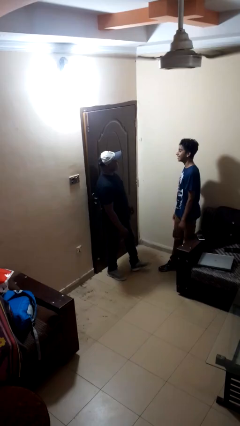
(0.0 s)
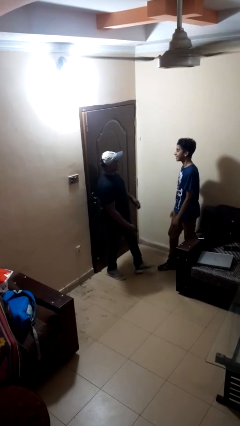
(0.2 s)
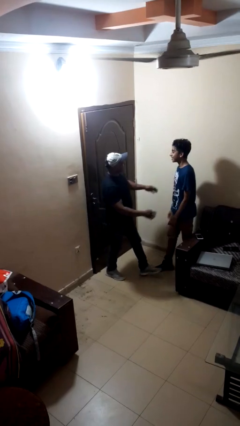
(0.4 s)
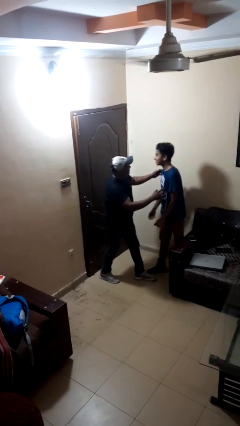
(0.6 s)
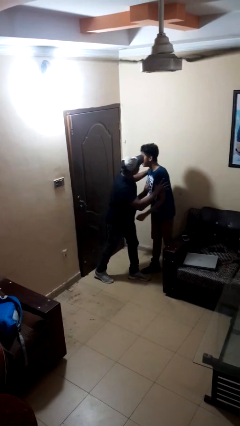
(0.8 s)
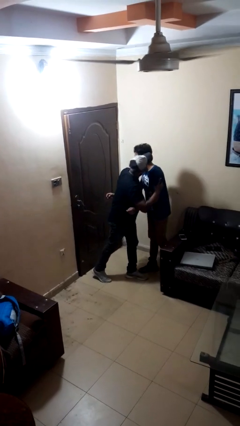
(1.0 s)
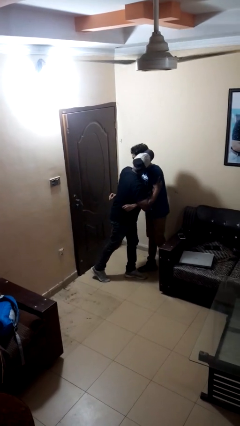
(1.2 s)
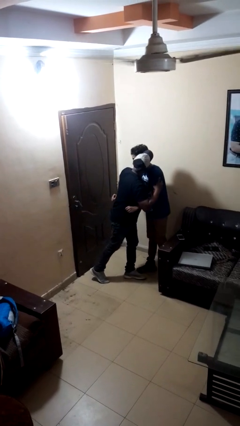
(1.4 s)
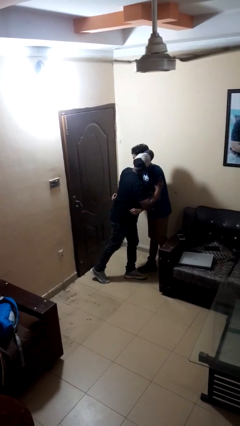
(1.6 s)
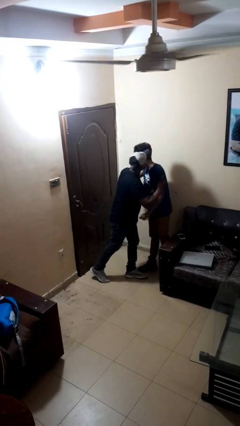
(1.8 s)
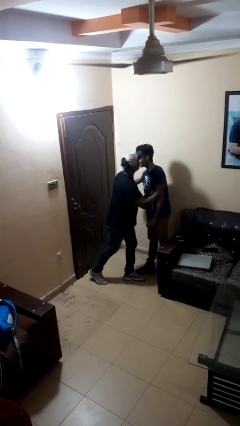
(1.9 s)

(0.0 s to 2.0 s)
person kisses cheek of person

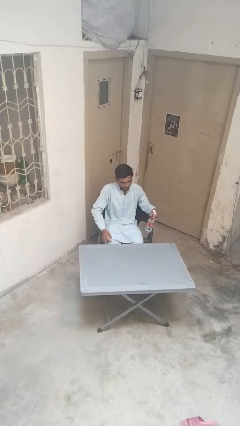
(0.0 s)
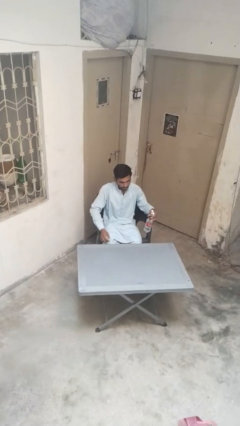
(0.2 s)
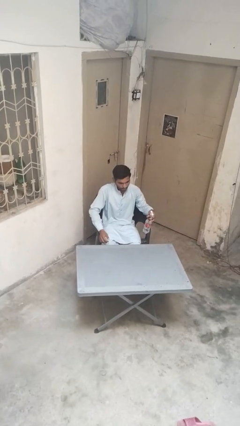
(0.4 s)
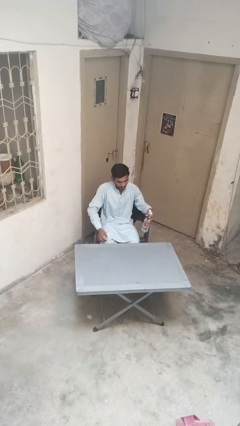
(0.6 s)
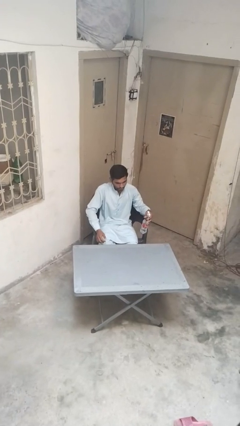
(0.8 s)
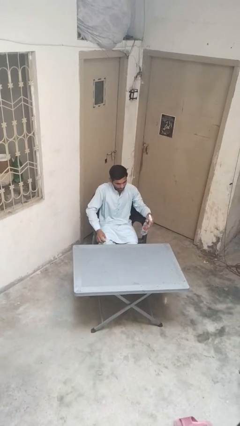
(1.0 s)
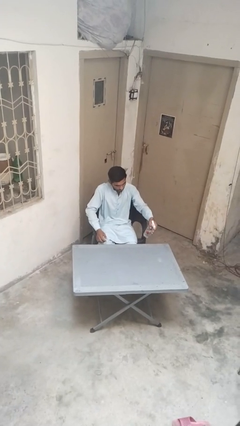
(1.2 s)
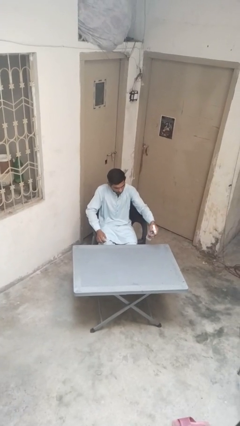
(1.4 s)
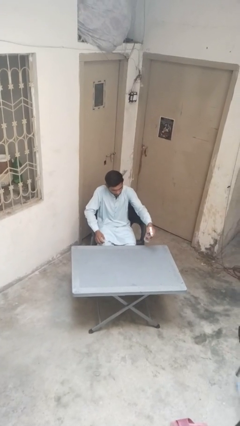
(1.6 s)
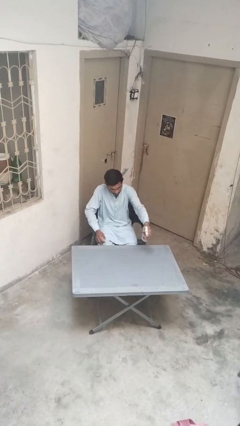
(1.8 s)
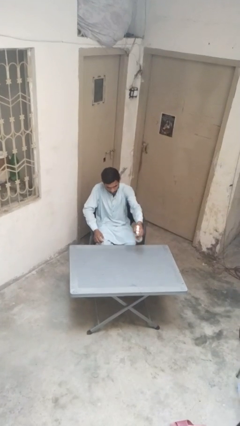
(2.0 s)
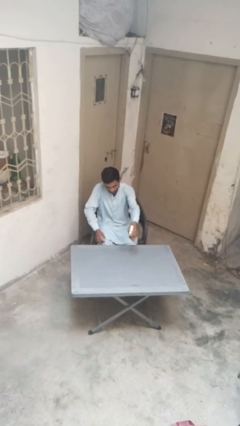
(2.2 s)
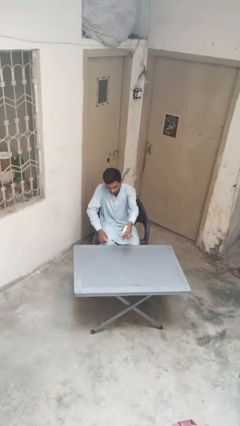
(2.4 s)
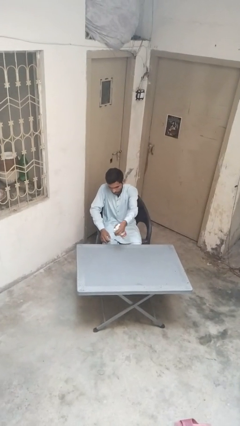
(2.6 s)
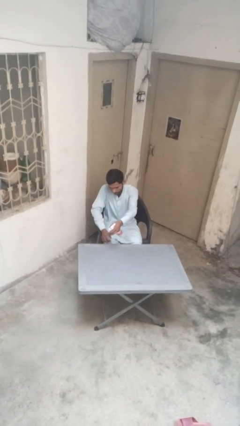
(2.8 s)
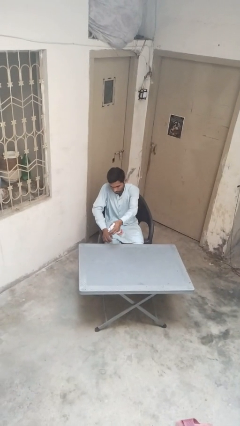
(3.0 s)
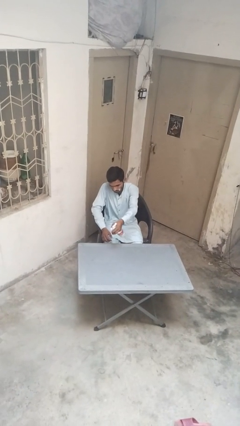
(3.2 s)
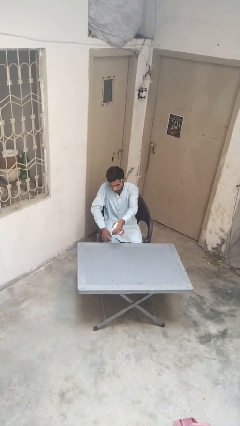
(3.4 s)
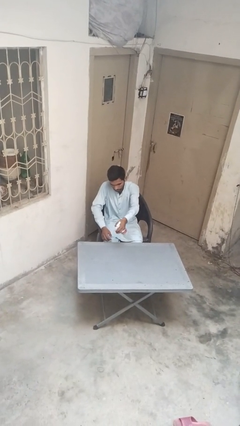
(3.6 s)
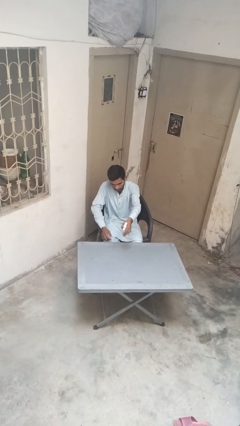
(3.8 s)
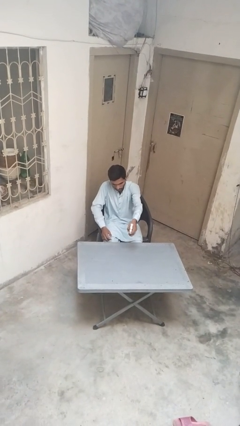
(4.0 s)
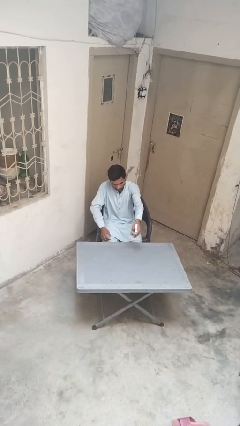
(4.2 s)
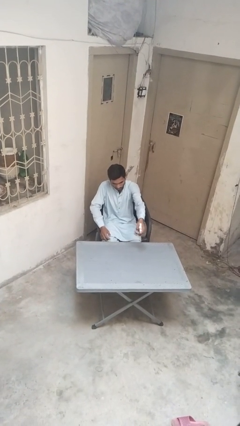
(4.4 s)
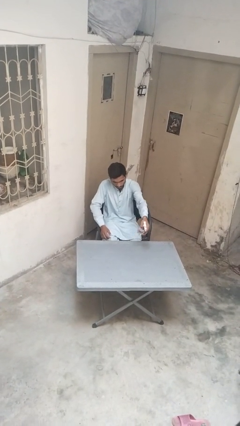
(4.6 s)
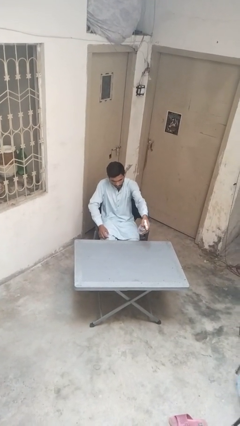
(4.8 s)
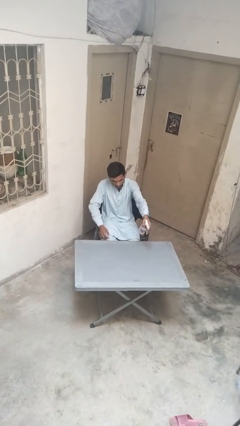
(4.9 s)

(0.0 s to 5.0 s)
person sprays from bottle

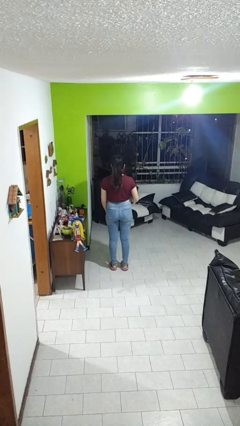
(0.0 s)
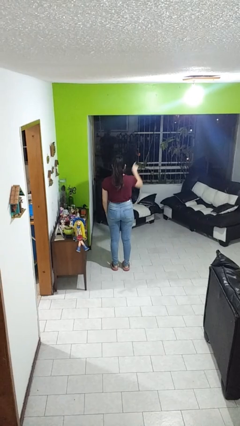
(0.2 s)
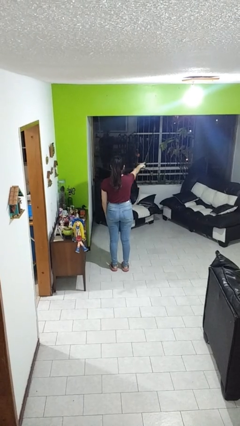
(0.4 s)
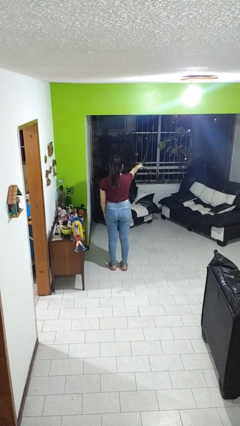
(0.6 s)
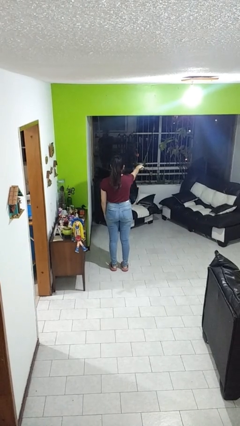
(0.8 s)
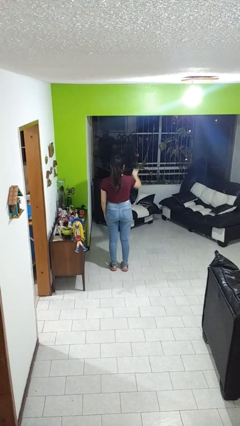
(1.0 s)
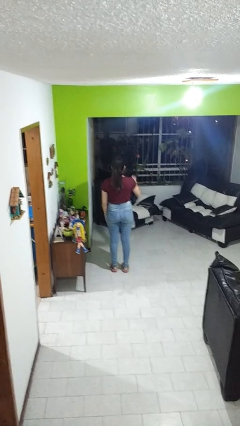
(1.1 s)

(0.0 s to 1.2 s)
person points at person

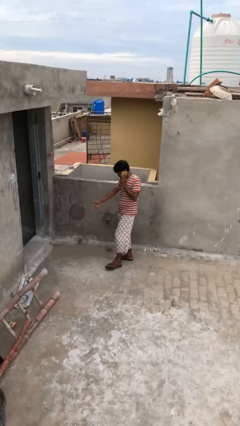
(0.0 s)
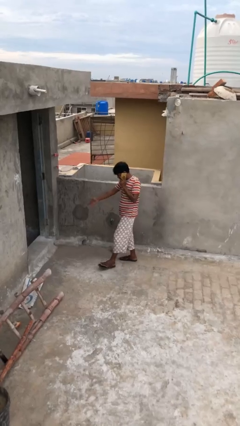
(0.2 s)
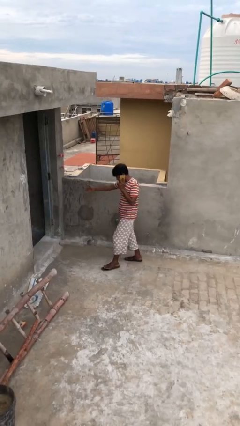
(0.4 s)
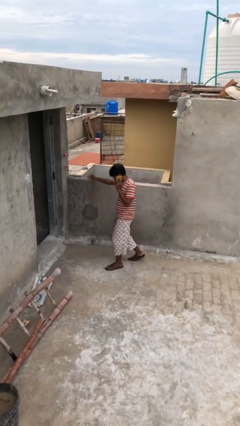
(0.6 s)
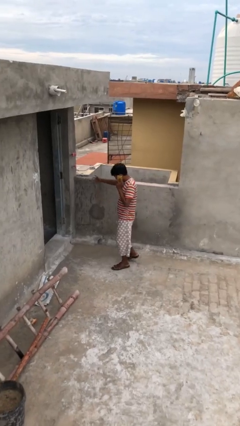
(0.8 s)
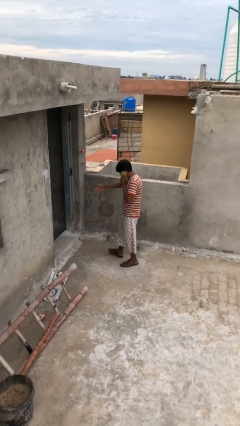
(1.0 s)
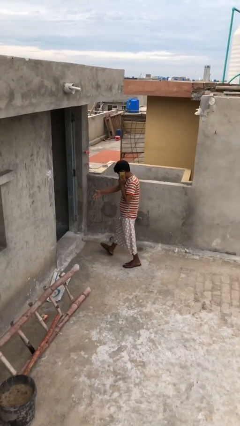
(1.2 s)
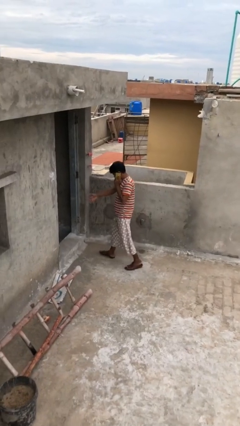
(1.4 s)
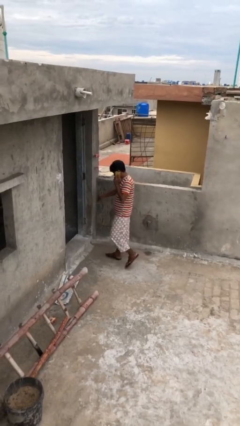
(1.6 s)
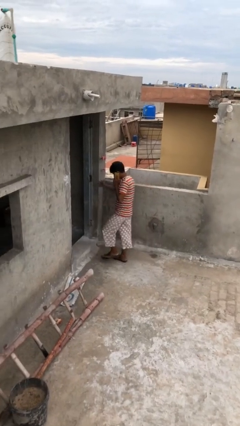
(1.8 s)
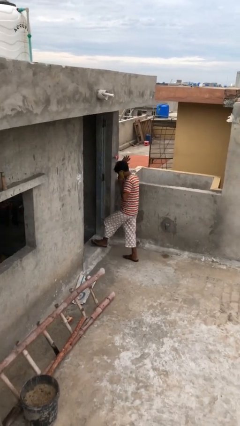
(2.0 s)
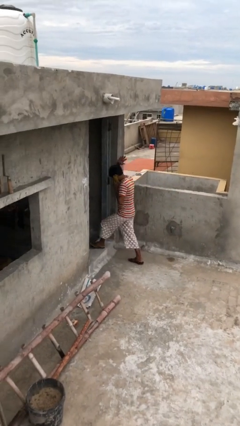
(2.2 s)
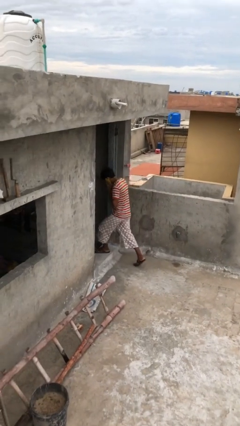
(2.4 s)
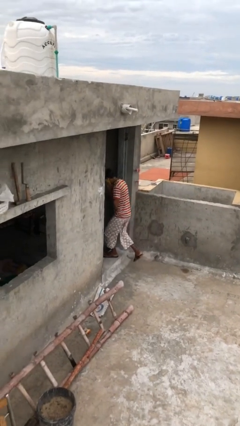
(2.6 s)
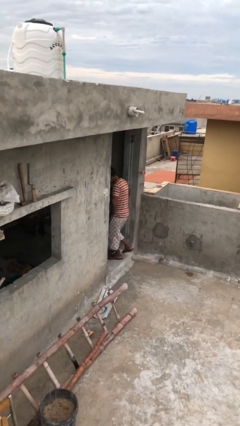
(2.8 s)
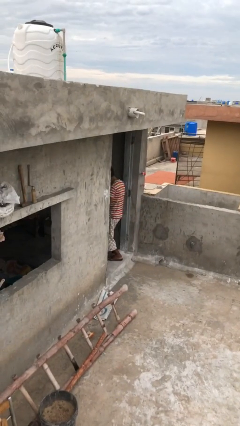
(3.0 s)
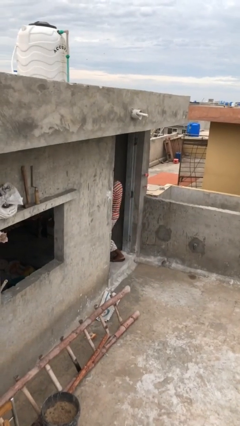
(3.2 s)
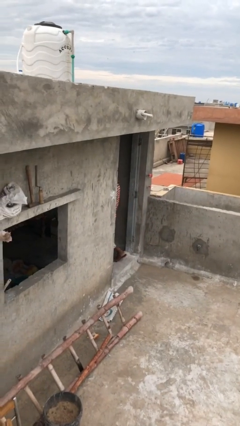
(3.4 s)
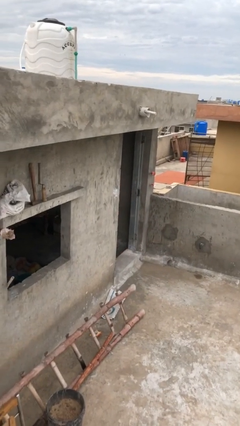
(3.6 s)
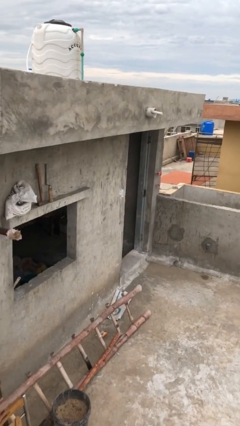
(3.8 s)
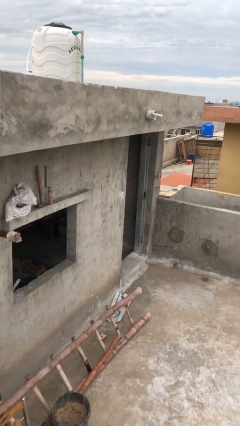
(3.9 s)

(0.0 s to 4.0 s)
person exits scene through structure

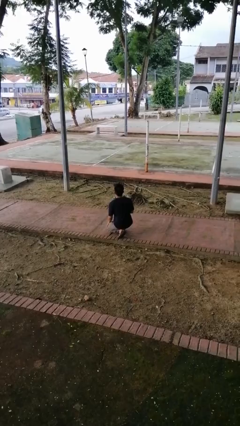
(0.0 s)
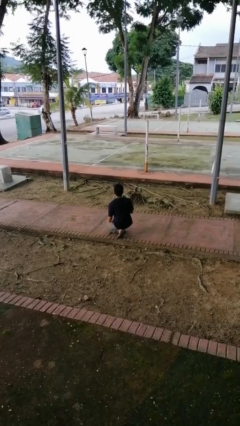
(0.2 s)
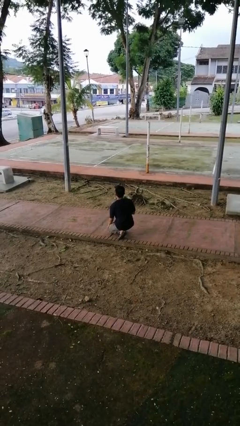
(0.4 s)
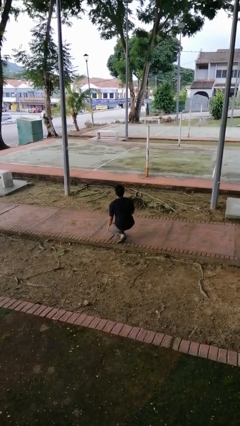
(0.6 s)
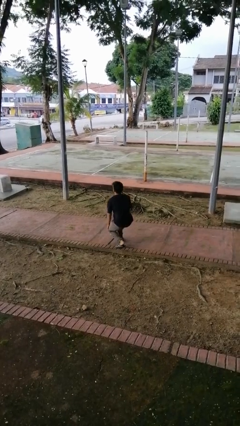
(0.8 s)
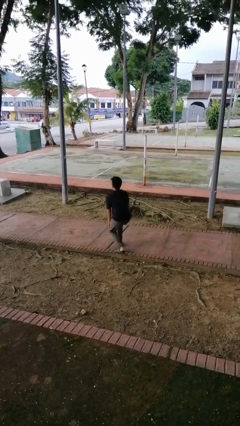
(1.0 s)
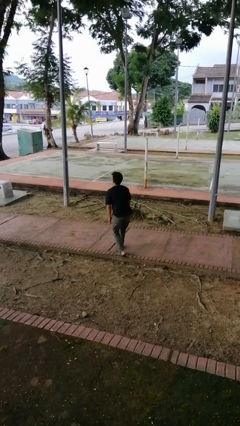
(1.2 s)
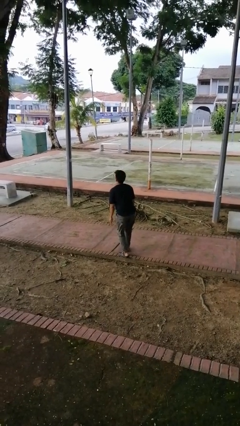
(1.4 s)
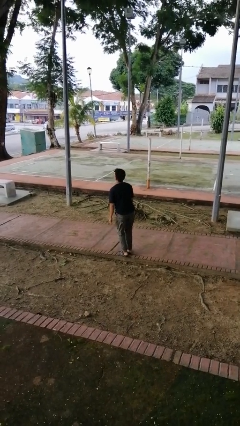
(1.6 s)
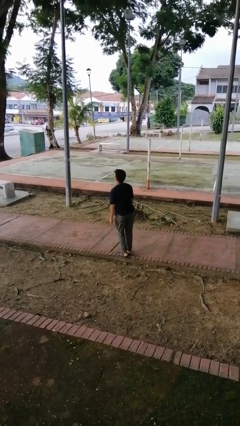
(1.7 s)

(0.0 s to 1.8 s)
person stands up from floor

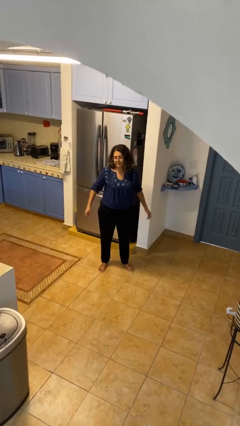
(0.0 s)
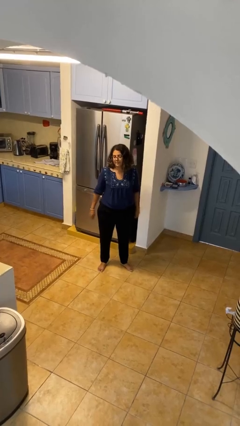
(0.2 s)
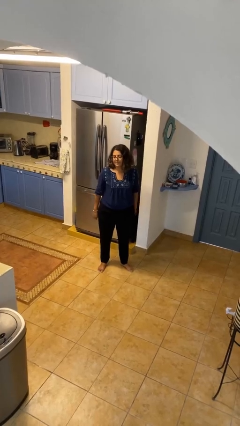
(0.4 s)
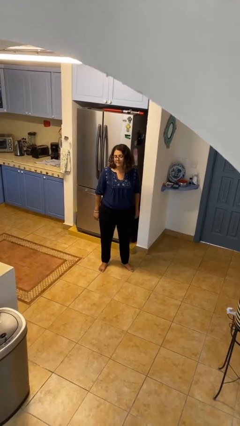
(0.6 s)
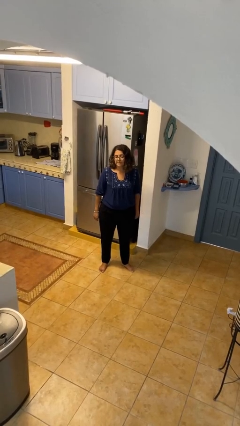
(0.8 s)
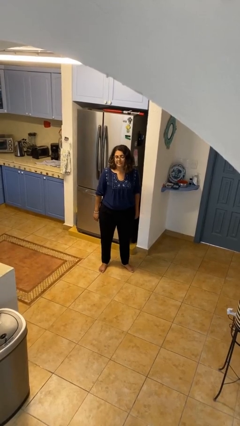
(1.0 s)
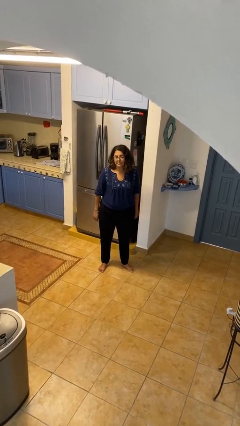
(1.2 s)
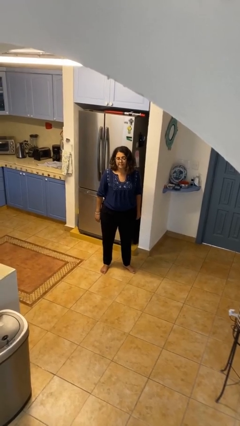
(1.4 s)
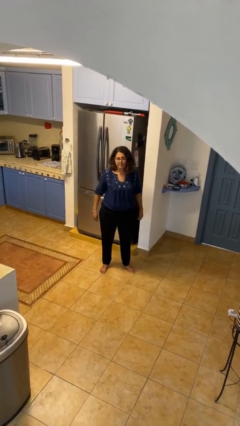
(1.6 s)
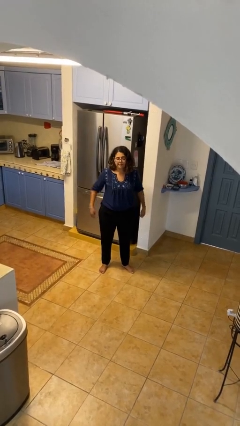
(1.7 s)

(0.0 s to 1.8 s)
person puts hands in back pockets

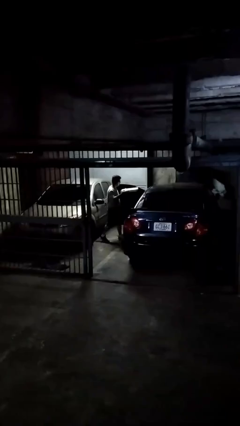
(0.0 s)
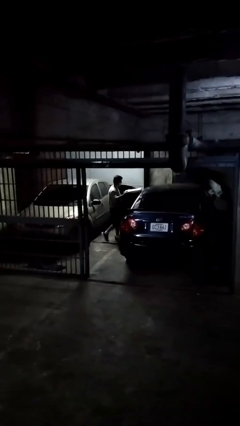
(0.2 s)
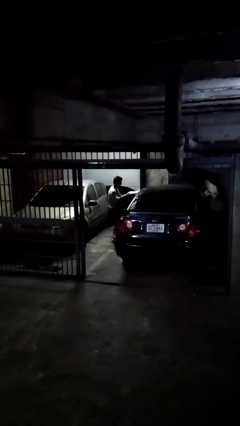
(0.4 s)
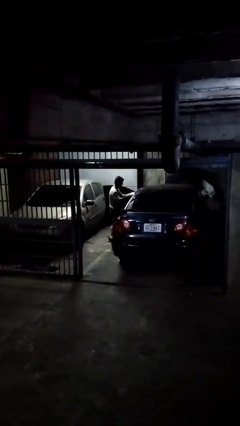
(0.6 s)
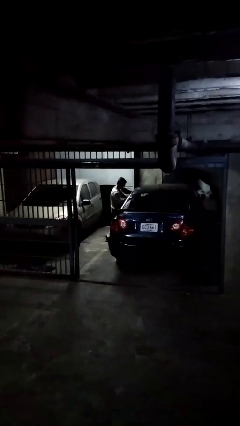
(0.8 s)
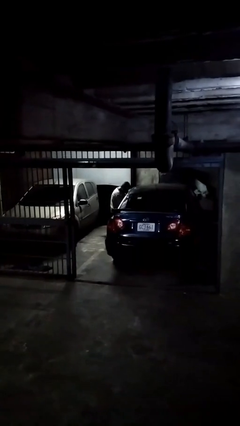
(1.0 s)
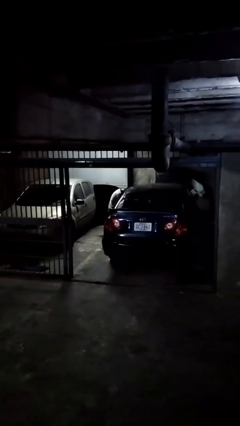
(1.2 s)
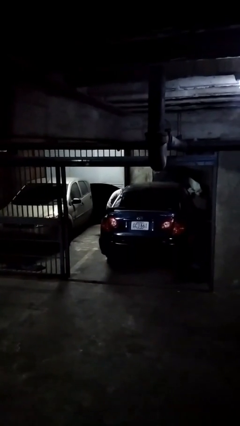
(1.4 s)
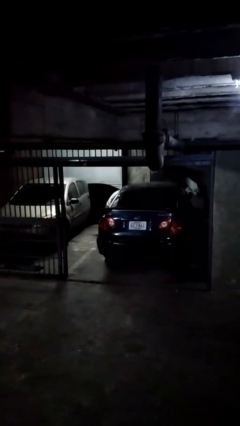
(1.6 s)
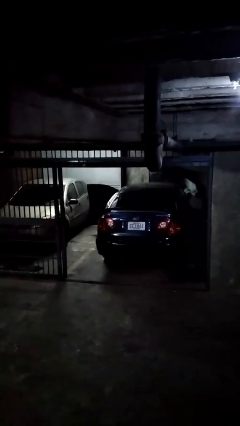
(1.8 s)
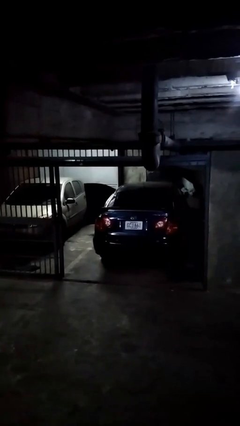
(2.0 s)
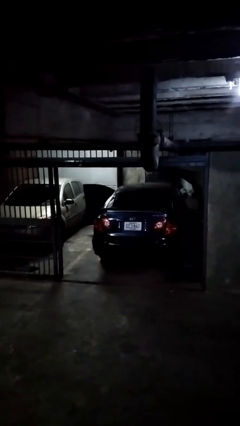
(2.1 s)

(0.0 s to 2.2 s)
person loads car
